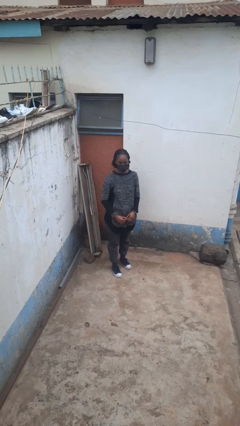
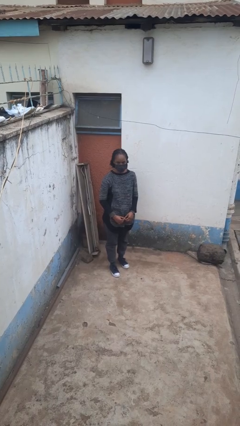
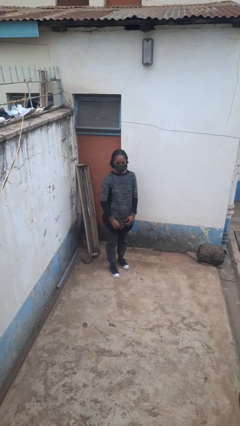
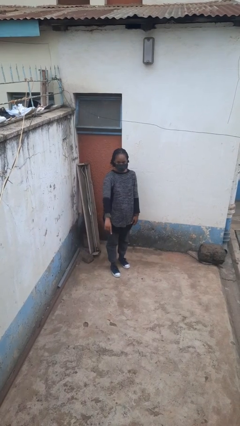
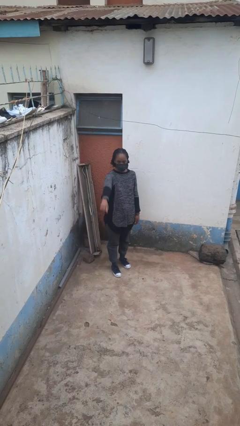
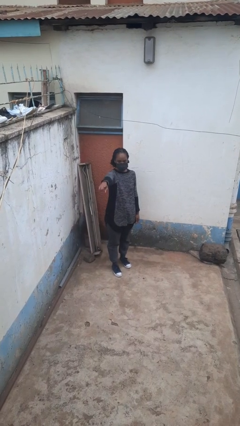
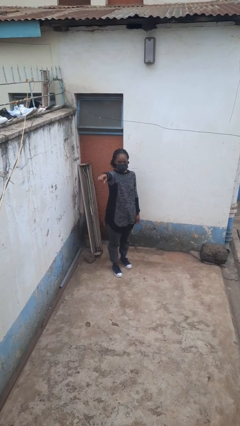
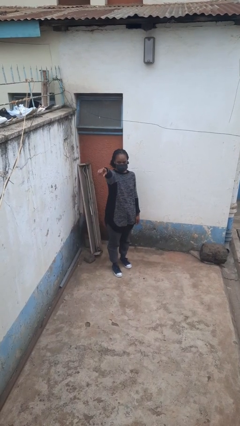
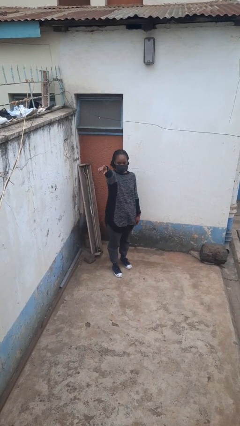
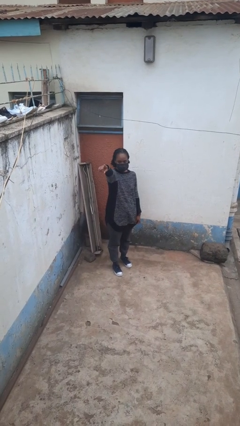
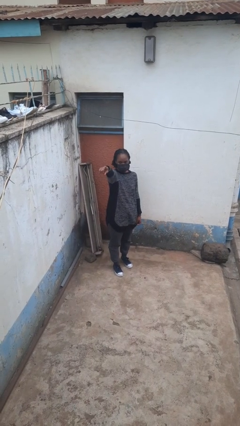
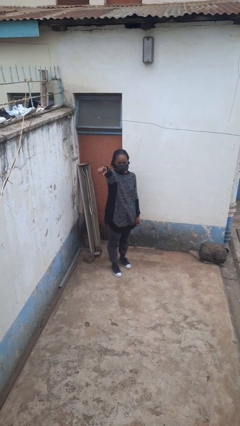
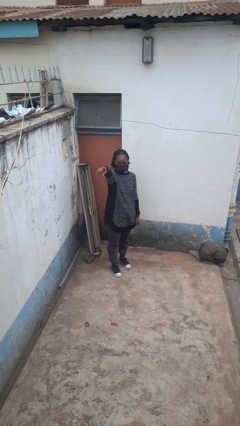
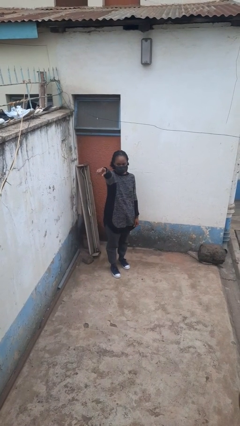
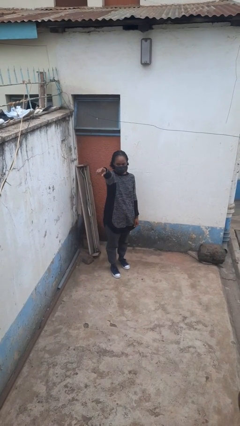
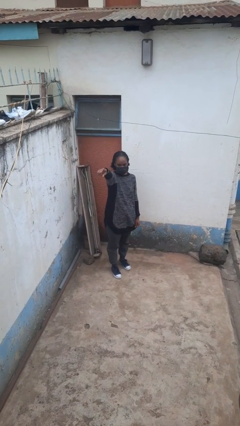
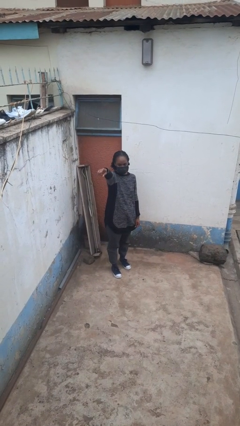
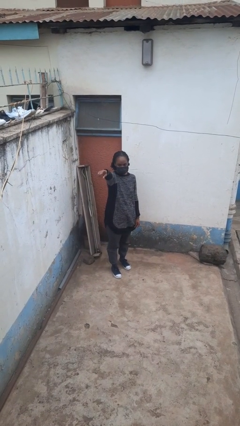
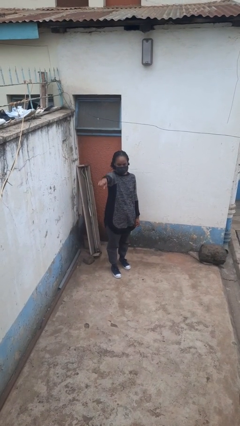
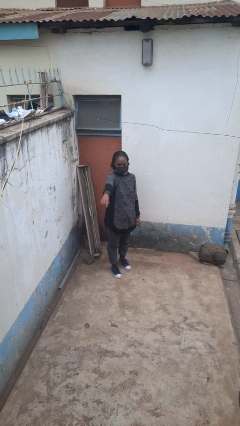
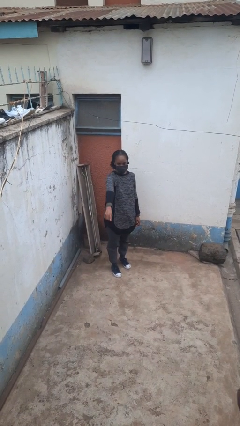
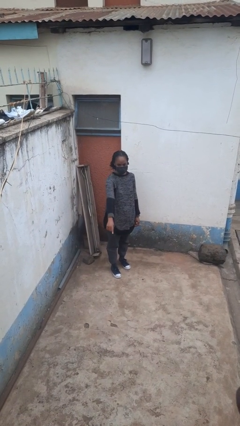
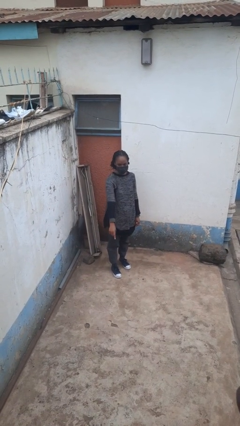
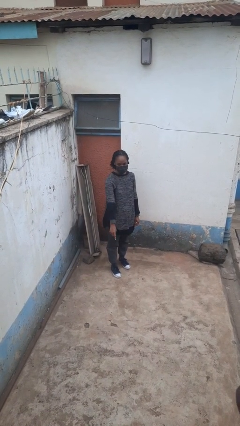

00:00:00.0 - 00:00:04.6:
person points at person

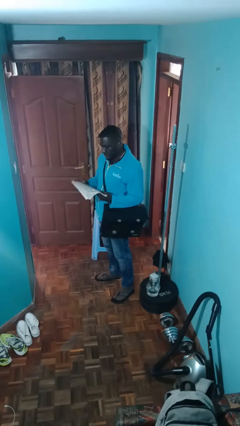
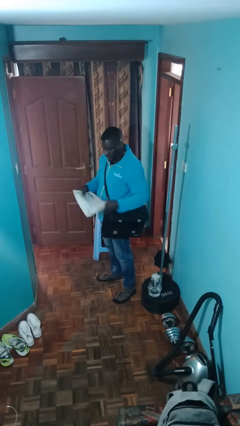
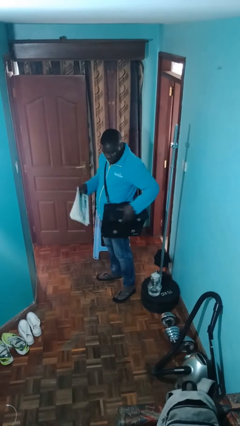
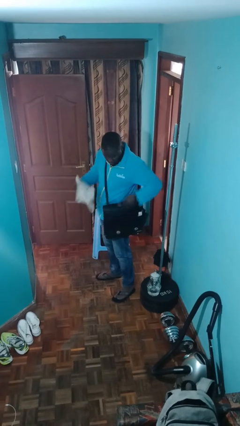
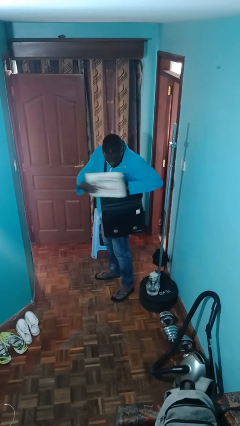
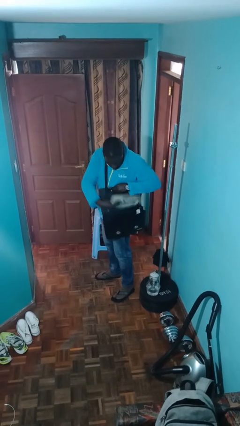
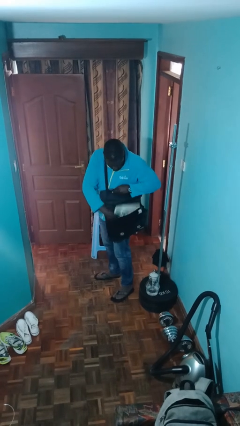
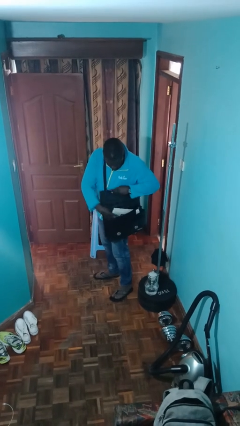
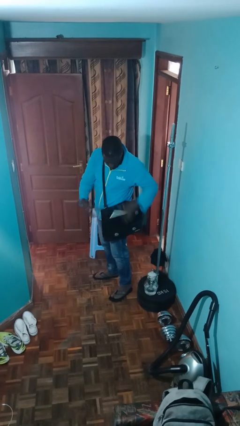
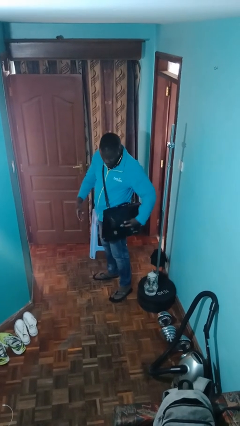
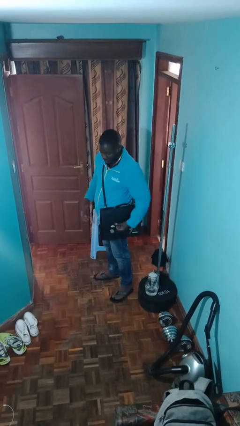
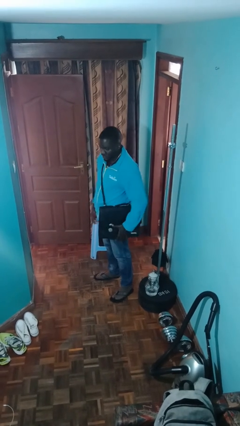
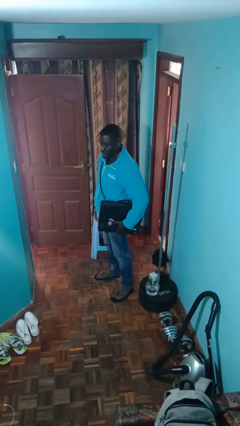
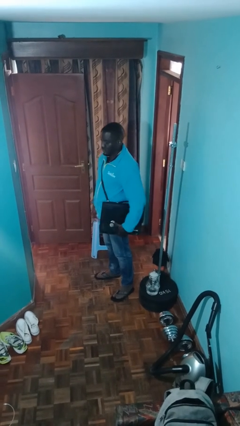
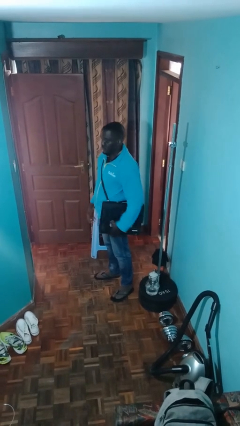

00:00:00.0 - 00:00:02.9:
person puts object into purse

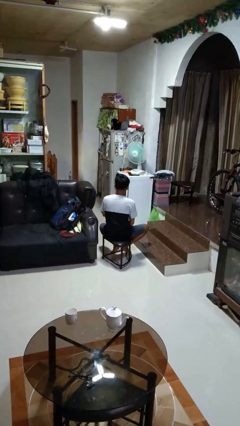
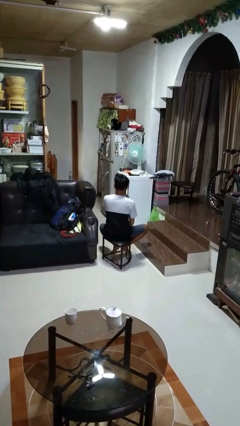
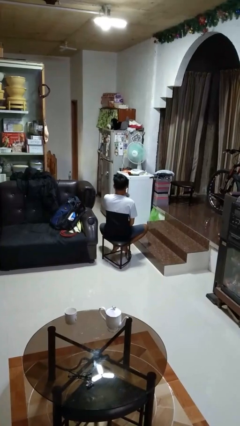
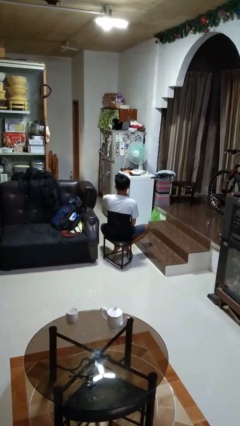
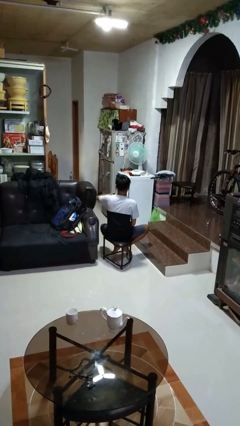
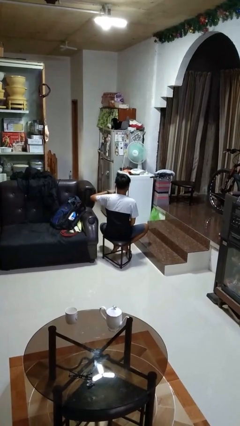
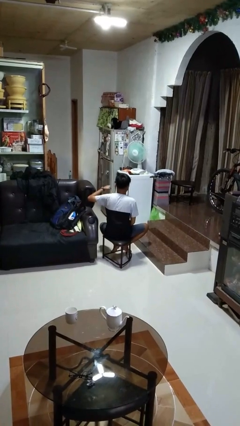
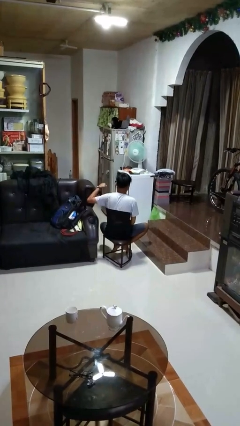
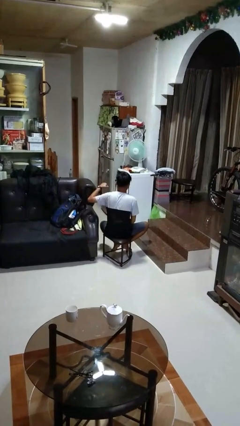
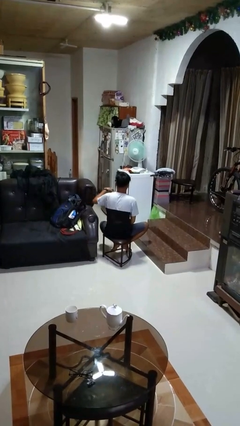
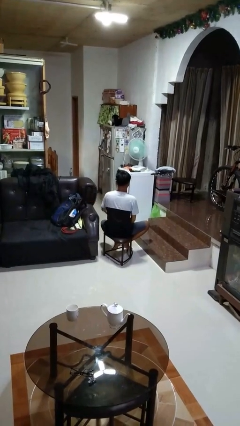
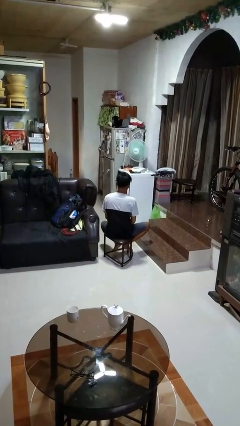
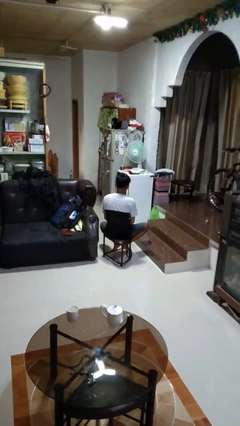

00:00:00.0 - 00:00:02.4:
person gestures cut

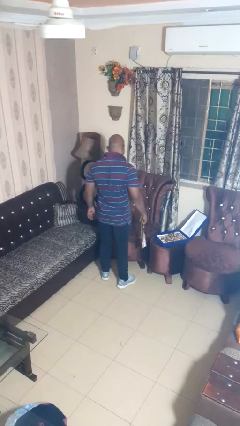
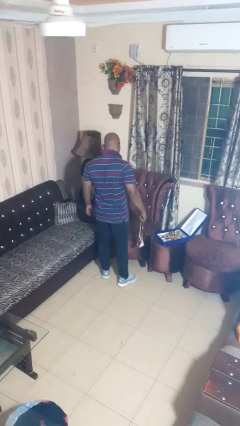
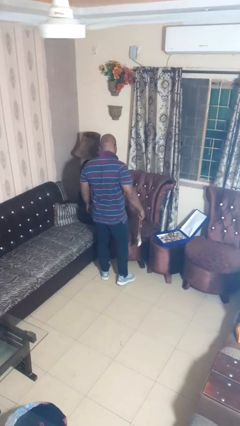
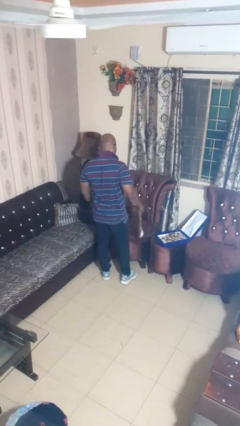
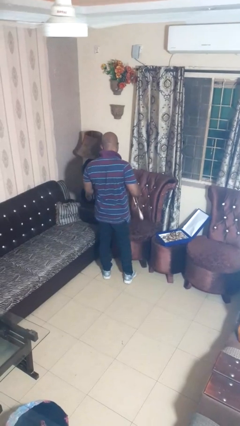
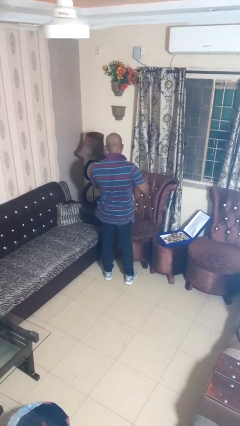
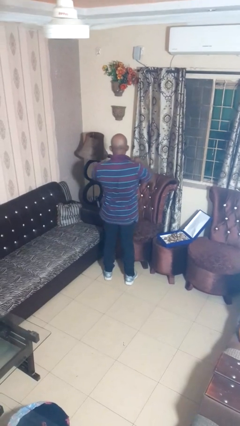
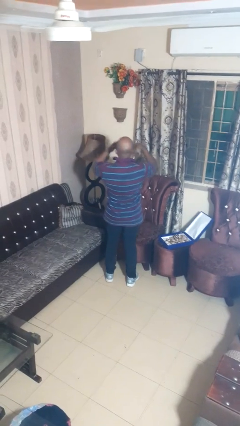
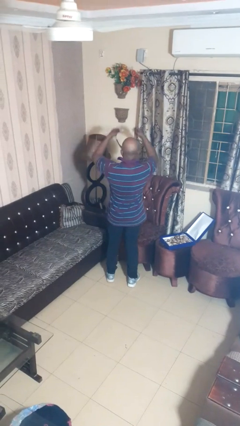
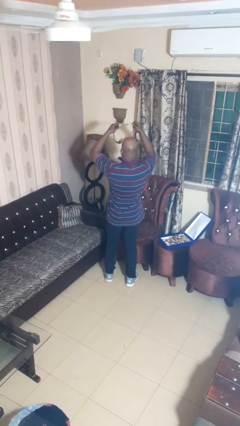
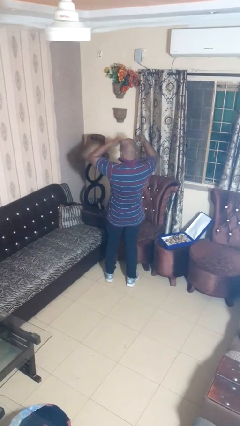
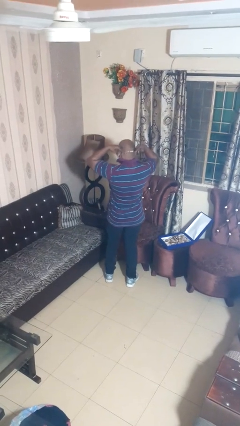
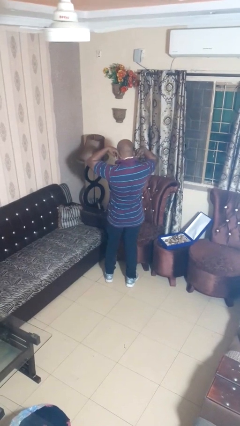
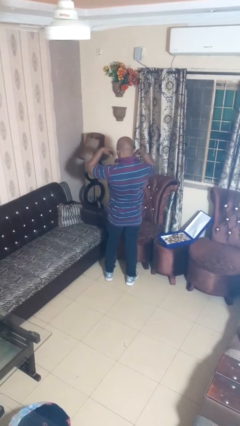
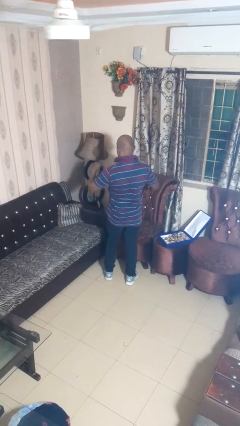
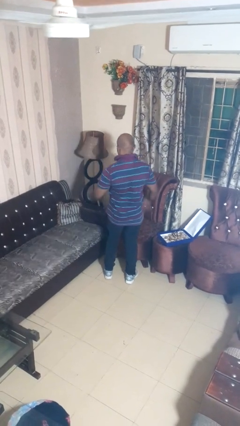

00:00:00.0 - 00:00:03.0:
person puts on necklace

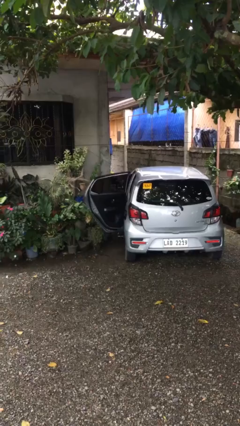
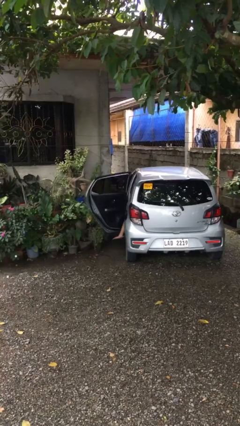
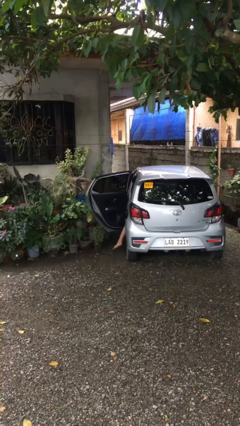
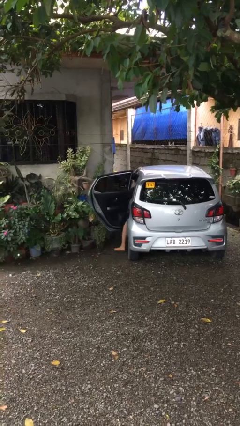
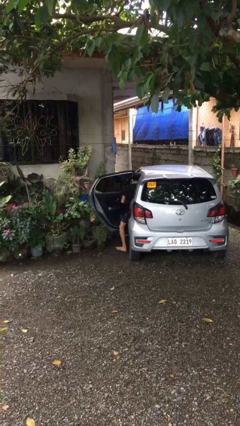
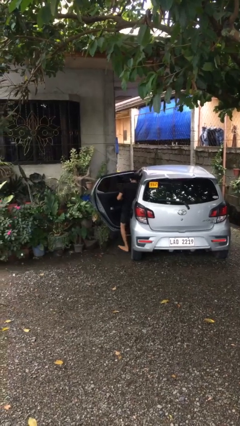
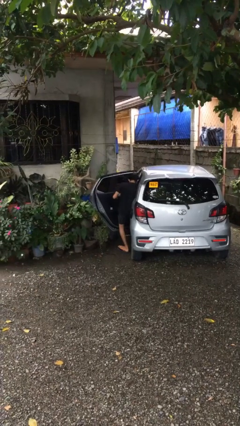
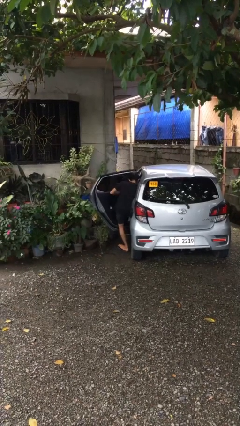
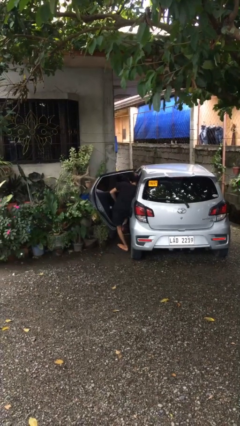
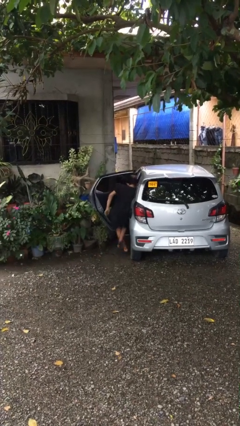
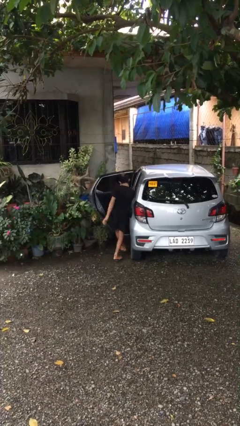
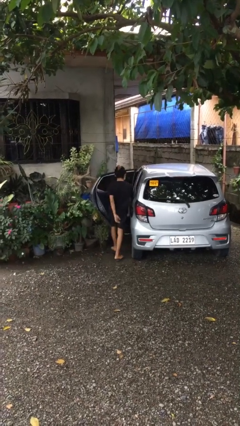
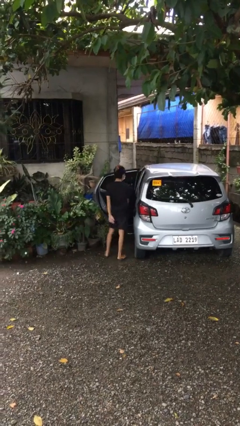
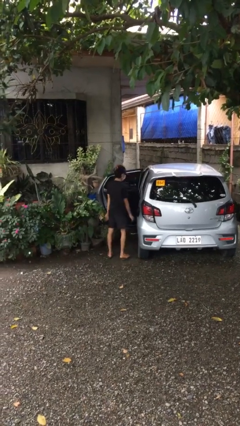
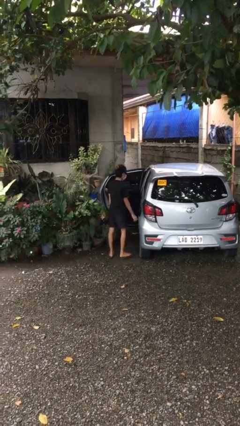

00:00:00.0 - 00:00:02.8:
person exits car

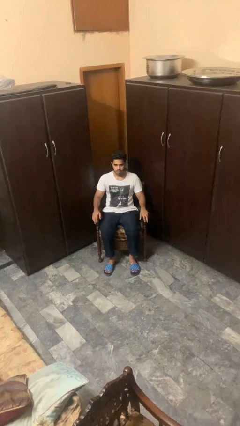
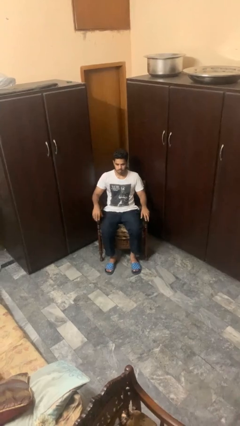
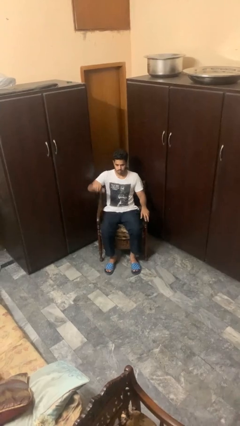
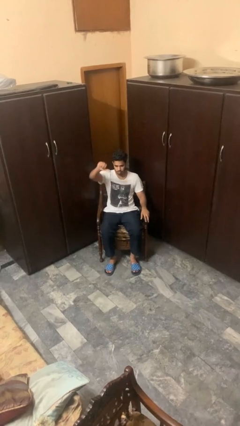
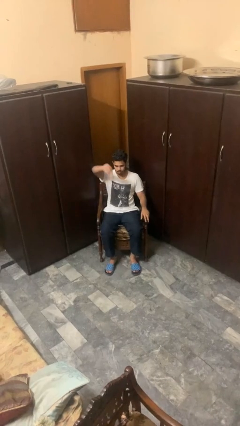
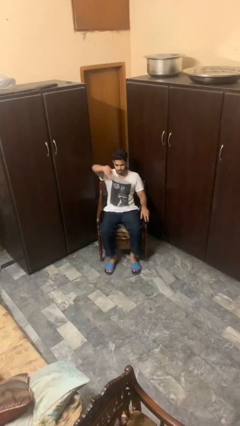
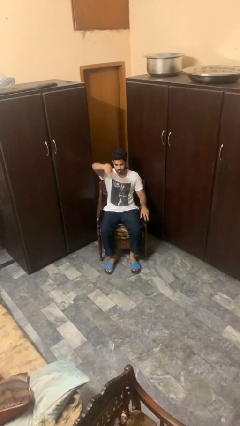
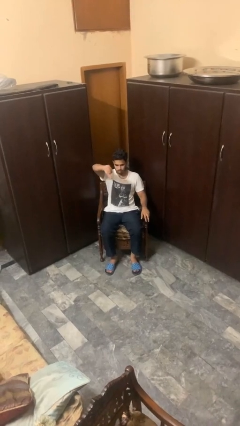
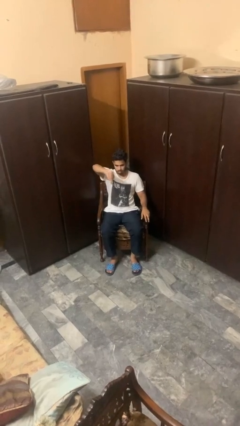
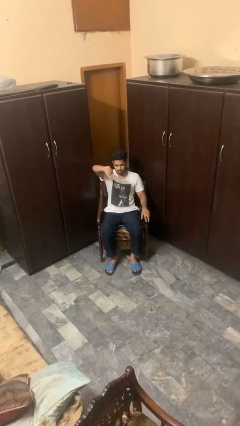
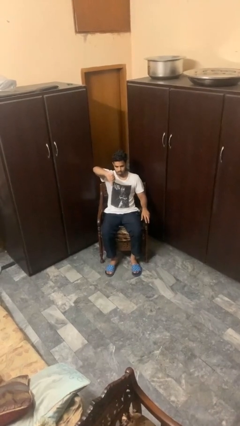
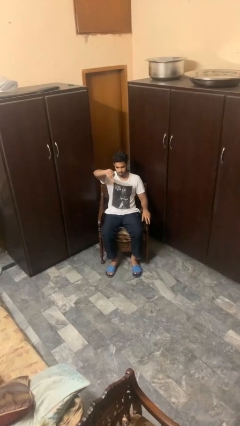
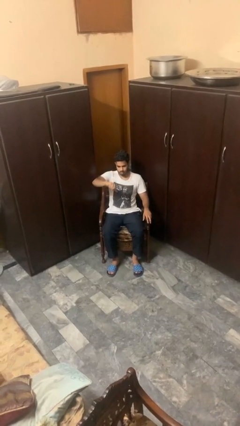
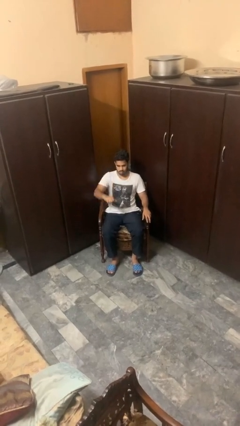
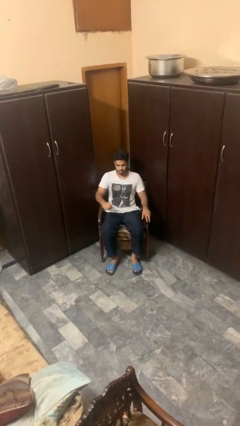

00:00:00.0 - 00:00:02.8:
person gestures thumbs down
